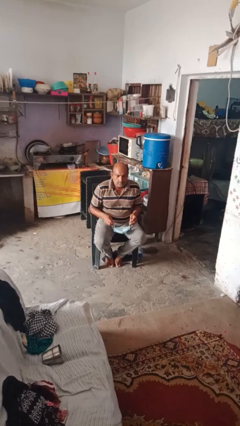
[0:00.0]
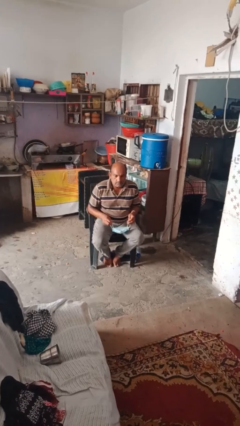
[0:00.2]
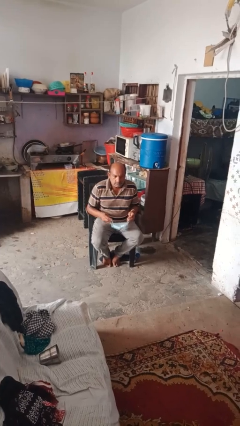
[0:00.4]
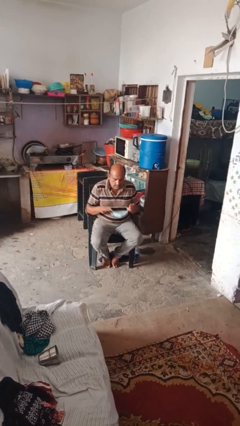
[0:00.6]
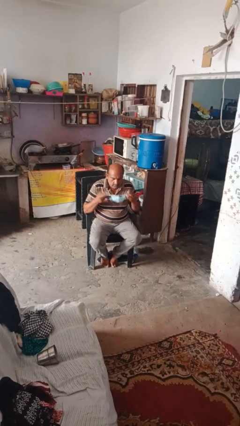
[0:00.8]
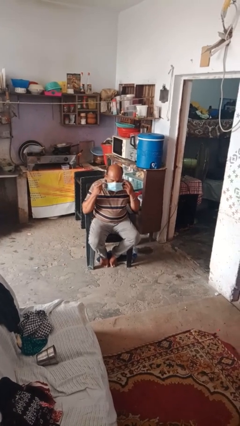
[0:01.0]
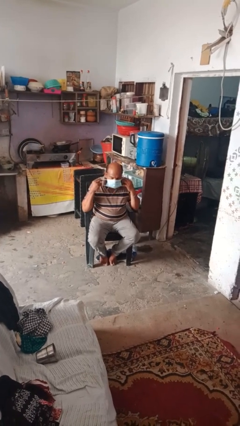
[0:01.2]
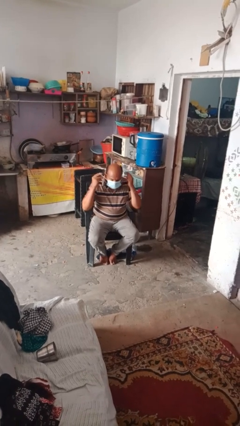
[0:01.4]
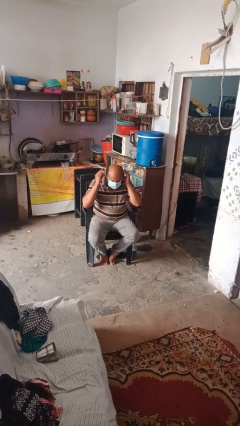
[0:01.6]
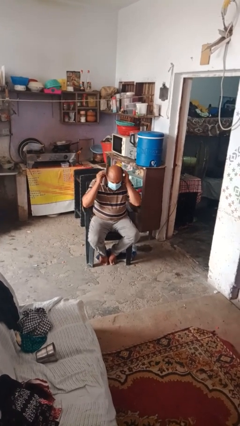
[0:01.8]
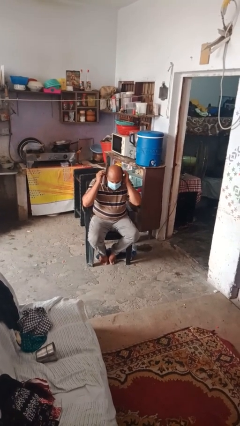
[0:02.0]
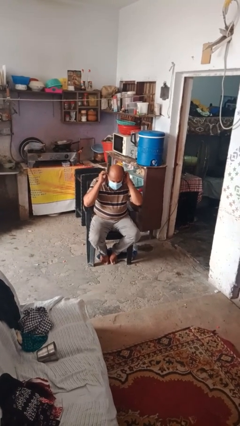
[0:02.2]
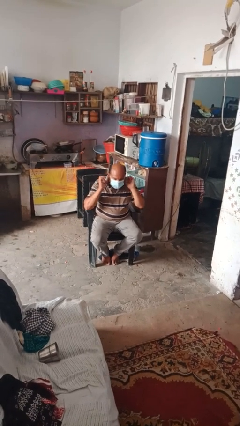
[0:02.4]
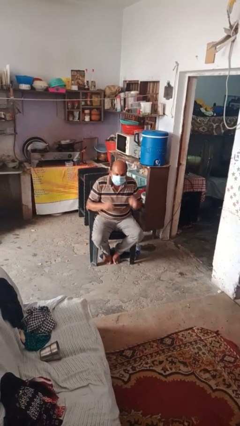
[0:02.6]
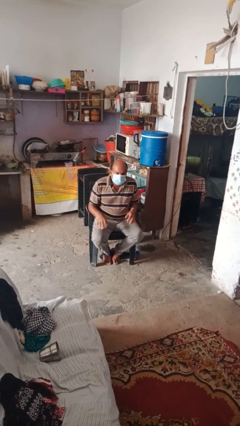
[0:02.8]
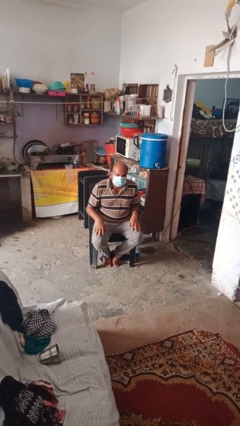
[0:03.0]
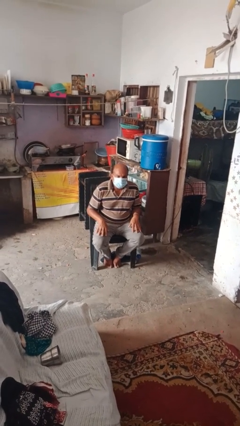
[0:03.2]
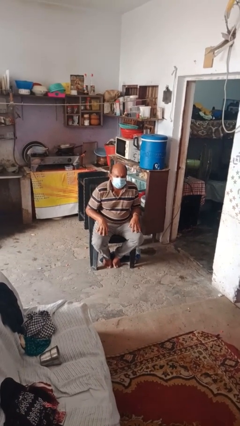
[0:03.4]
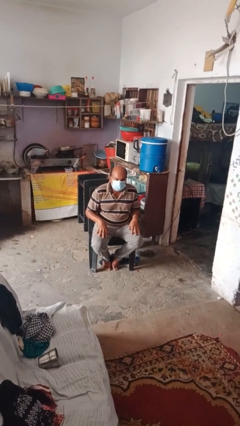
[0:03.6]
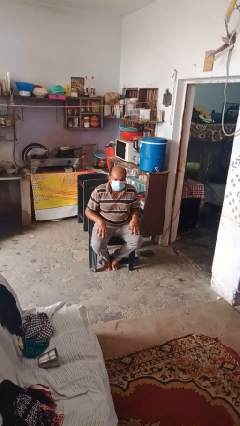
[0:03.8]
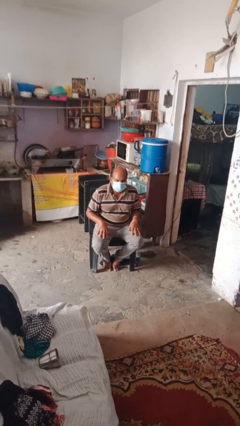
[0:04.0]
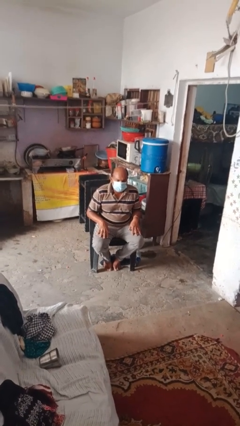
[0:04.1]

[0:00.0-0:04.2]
person puts on facemask

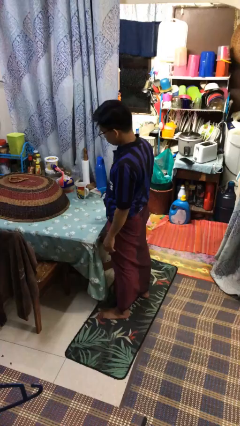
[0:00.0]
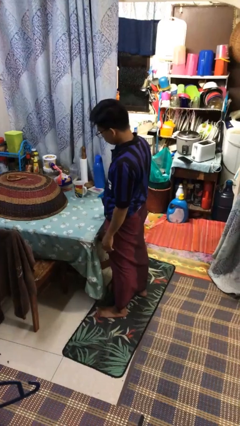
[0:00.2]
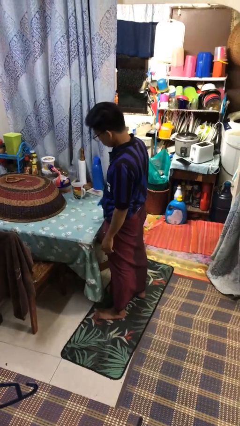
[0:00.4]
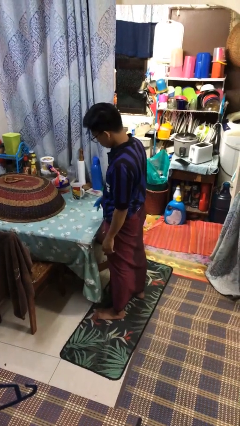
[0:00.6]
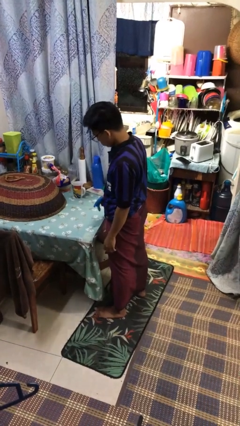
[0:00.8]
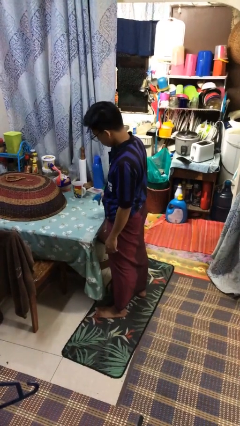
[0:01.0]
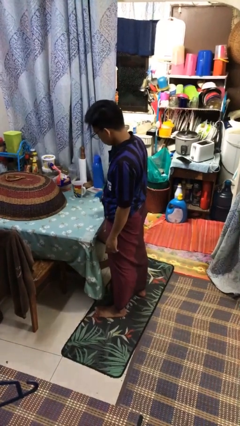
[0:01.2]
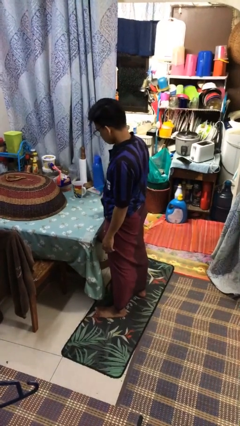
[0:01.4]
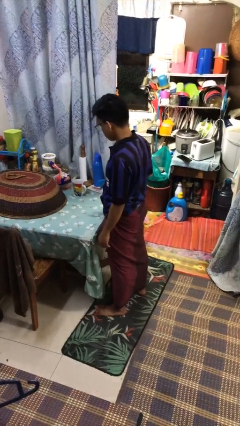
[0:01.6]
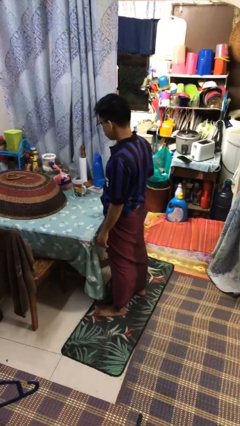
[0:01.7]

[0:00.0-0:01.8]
person sprays from bottle

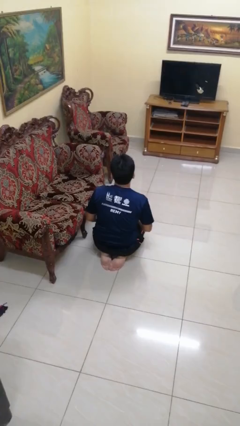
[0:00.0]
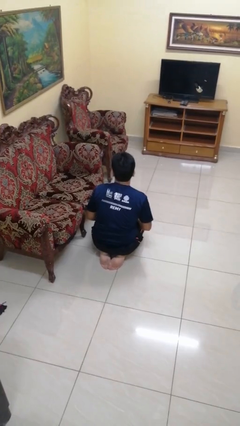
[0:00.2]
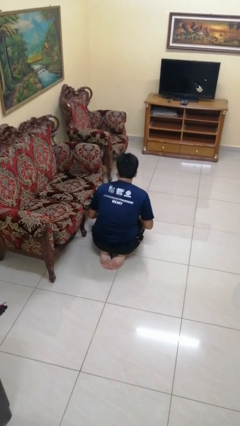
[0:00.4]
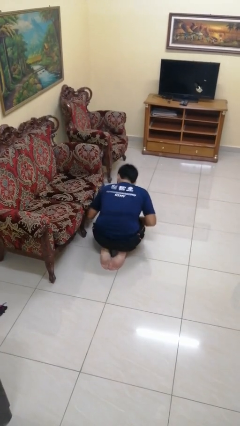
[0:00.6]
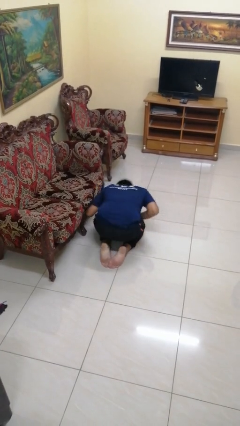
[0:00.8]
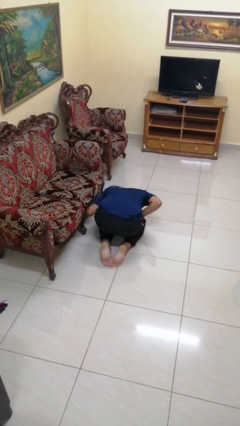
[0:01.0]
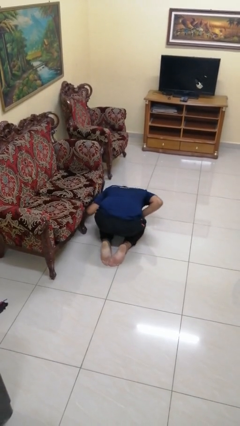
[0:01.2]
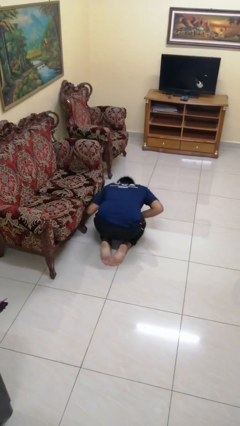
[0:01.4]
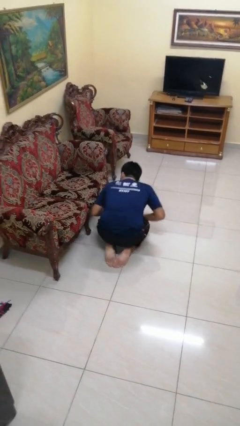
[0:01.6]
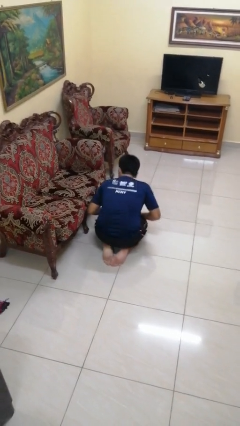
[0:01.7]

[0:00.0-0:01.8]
person searches under couch

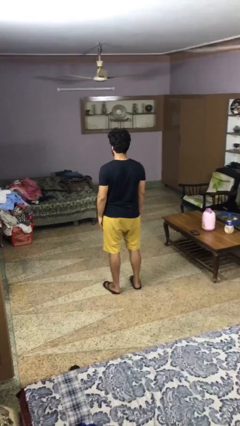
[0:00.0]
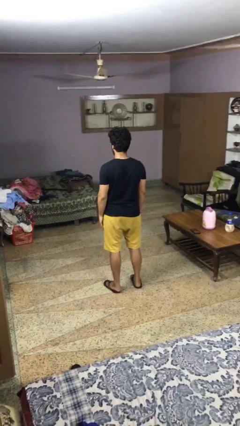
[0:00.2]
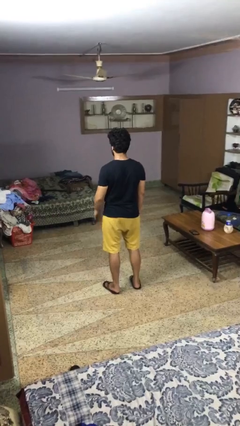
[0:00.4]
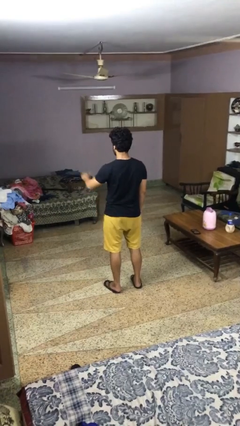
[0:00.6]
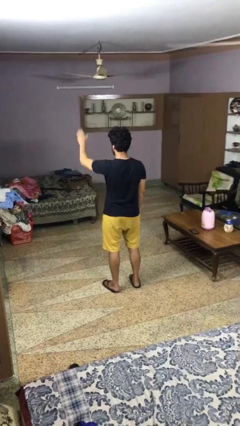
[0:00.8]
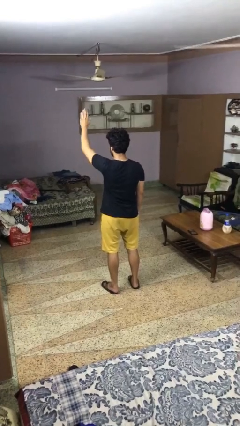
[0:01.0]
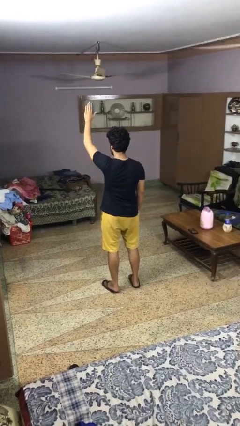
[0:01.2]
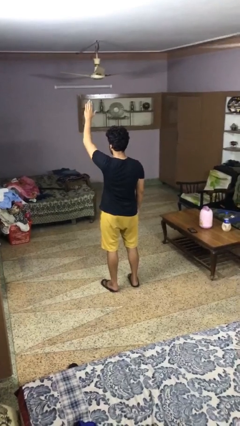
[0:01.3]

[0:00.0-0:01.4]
person gestures raise hand

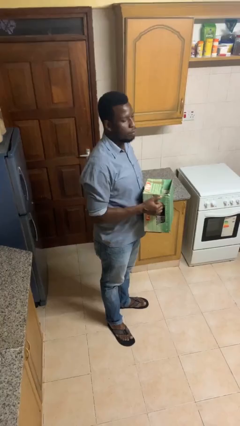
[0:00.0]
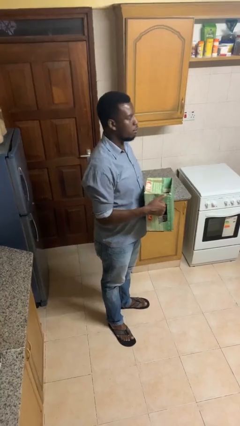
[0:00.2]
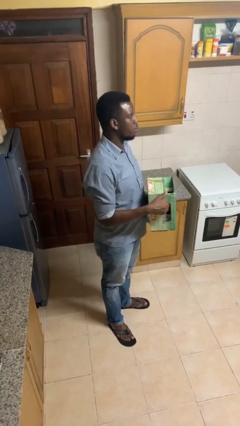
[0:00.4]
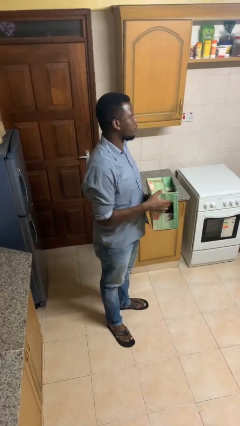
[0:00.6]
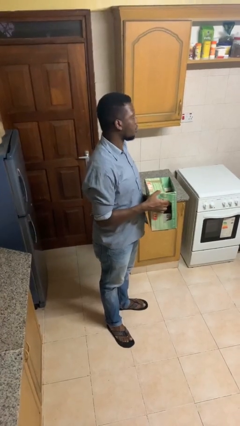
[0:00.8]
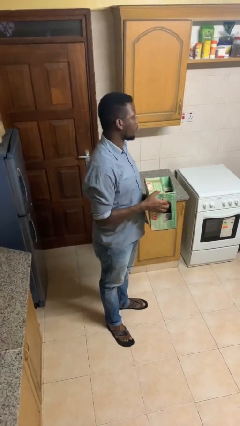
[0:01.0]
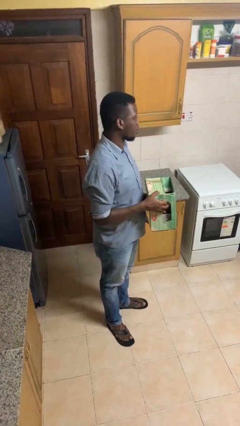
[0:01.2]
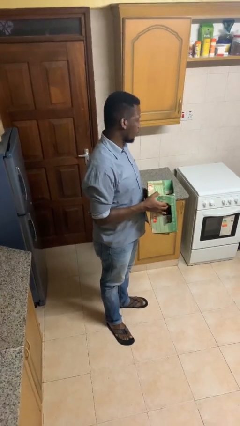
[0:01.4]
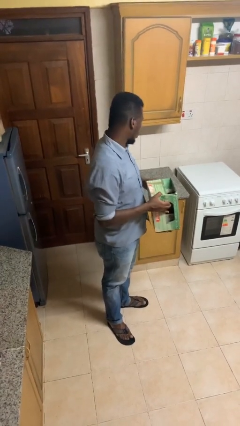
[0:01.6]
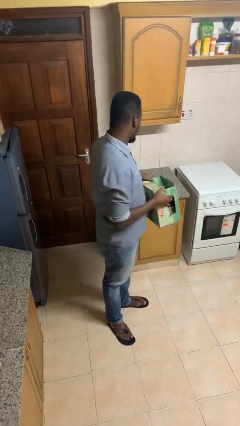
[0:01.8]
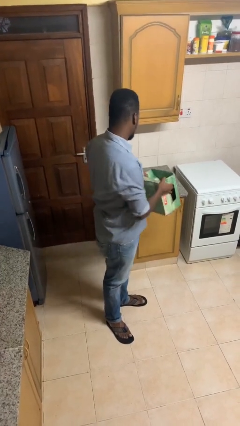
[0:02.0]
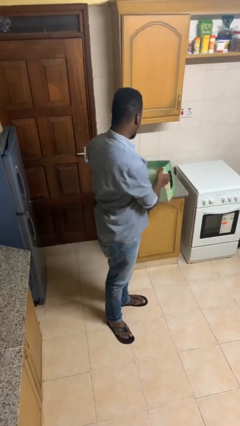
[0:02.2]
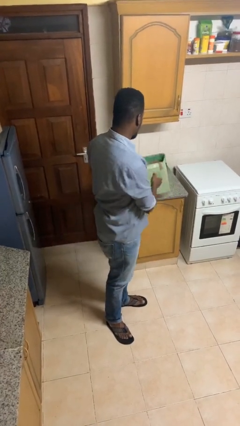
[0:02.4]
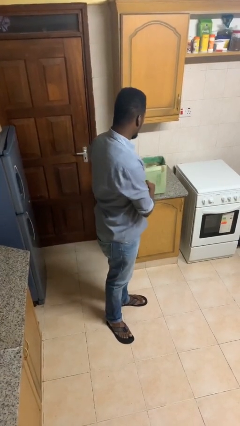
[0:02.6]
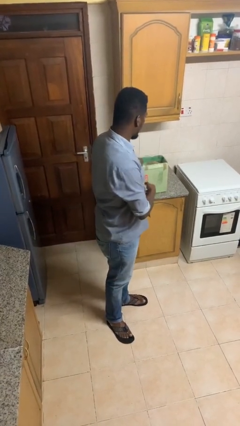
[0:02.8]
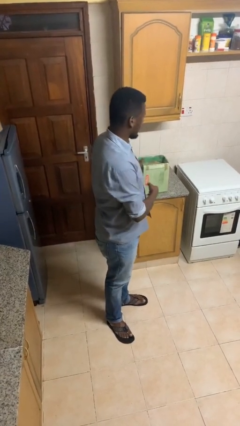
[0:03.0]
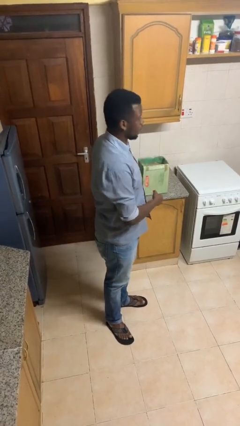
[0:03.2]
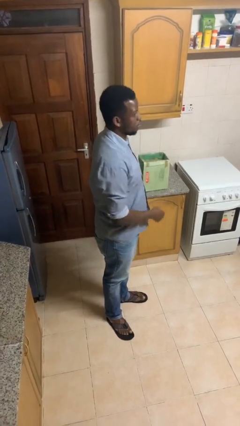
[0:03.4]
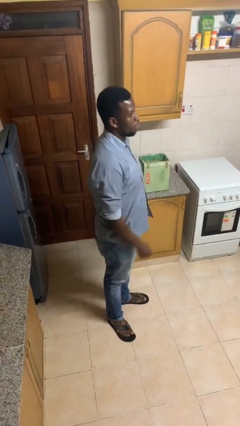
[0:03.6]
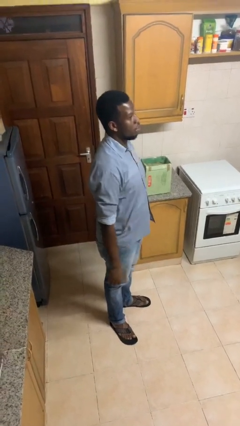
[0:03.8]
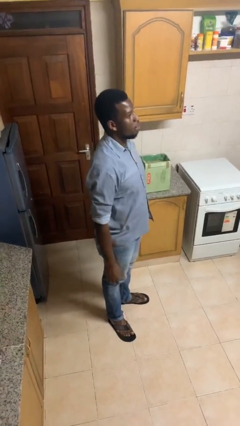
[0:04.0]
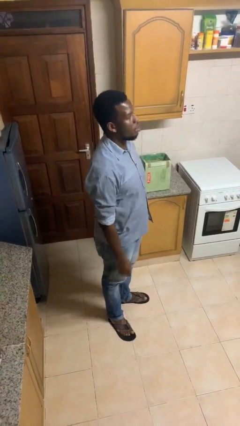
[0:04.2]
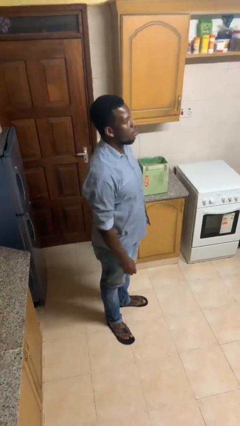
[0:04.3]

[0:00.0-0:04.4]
person puts down object on table

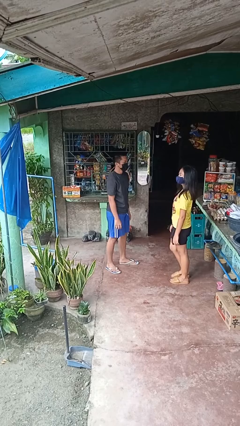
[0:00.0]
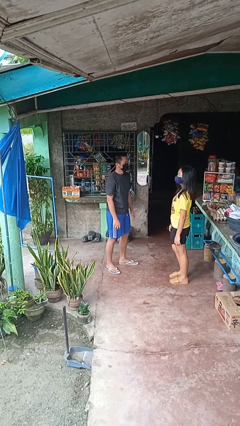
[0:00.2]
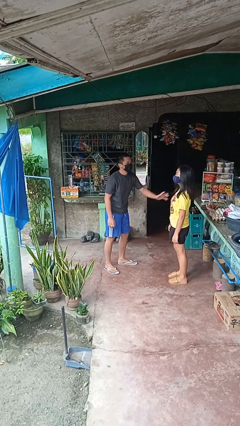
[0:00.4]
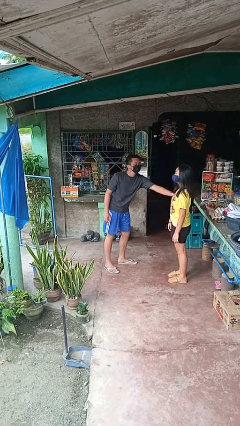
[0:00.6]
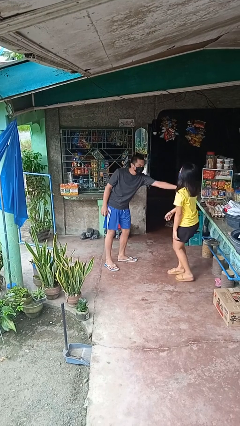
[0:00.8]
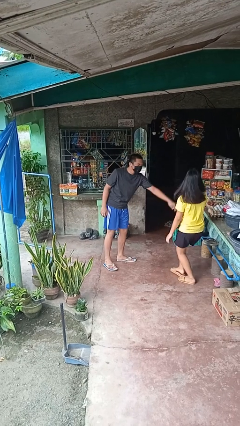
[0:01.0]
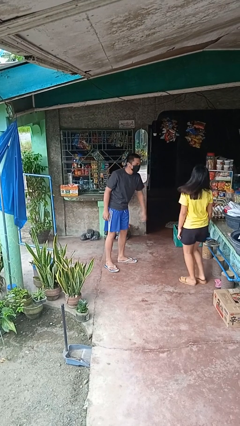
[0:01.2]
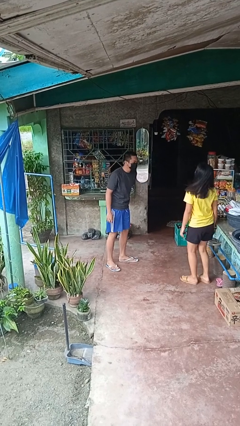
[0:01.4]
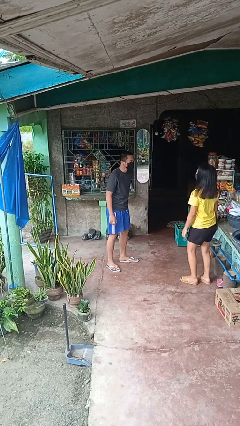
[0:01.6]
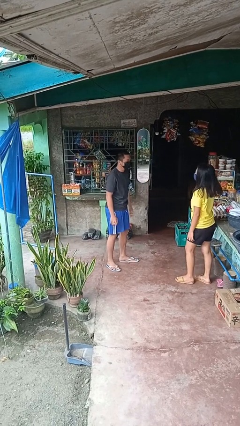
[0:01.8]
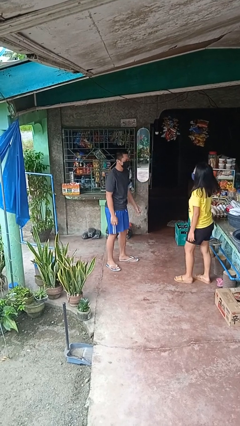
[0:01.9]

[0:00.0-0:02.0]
person shoves person

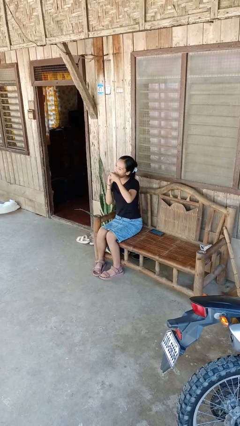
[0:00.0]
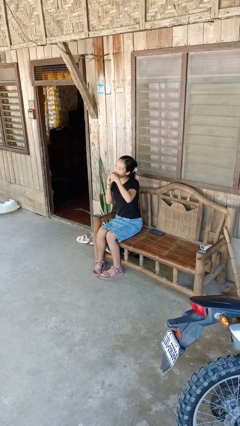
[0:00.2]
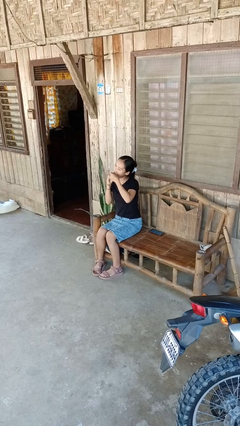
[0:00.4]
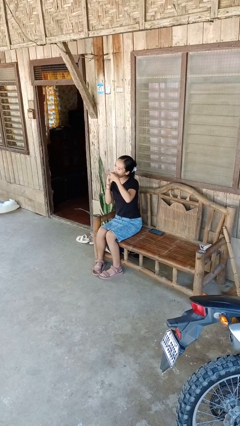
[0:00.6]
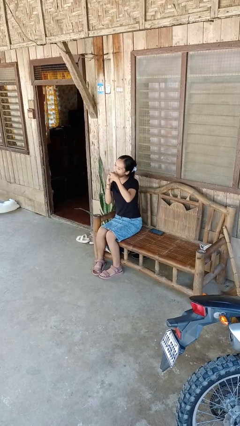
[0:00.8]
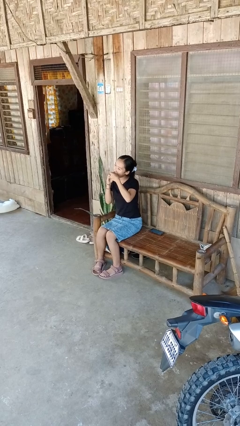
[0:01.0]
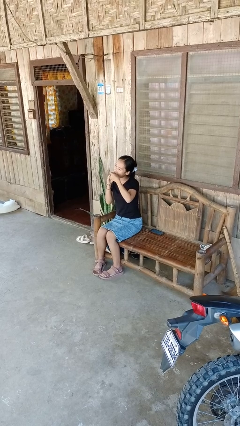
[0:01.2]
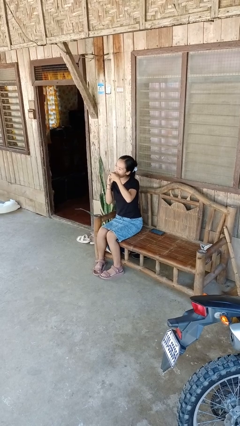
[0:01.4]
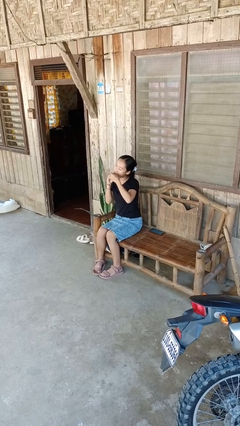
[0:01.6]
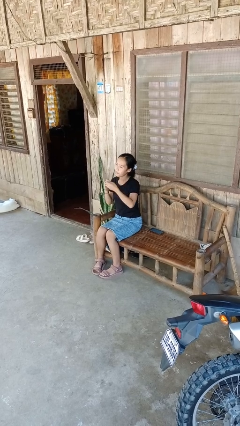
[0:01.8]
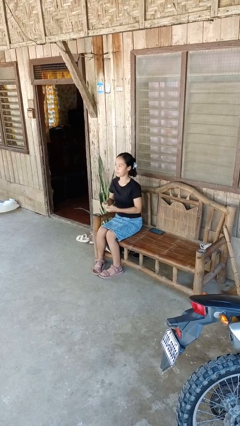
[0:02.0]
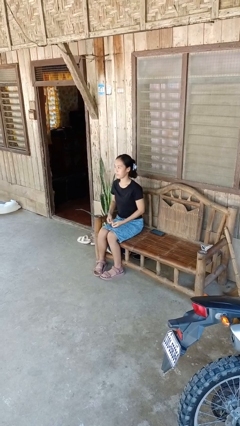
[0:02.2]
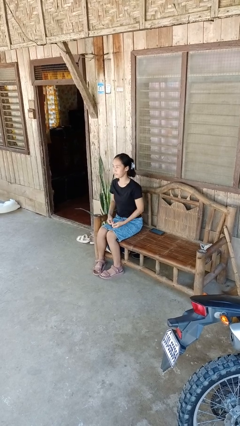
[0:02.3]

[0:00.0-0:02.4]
person flosses
